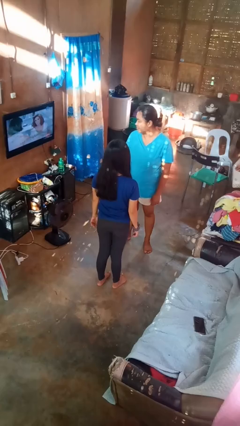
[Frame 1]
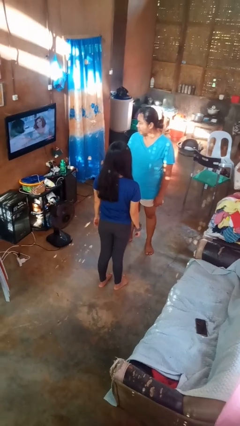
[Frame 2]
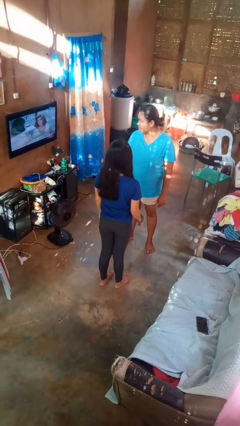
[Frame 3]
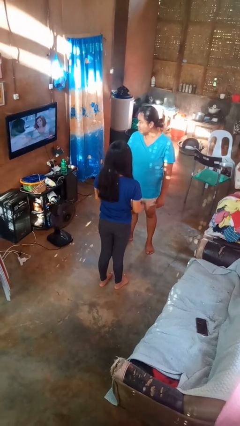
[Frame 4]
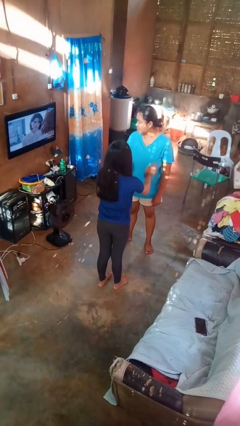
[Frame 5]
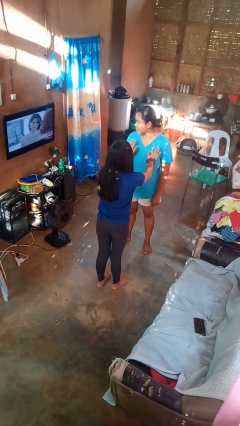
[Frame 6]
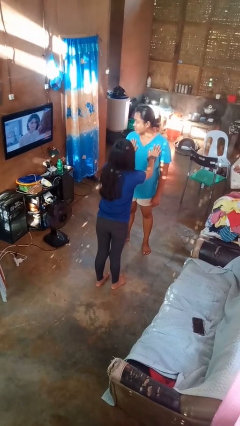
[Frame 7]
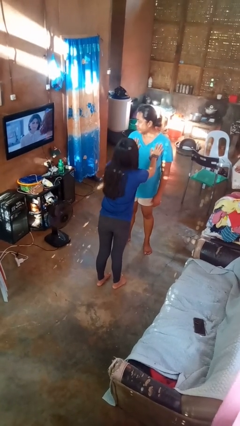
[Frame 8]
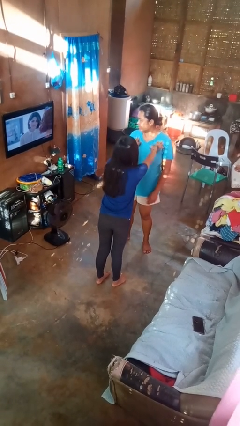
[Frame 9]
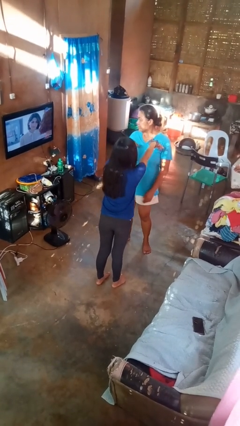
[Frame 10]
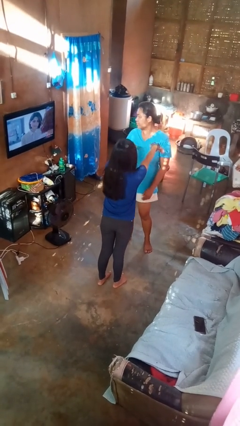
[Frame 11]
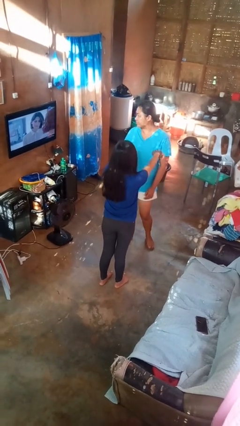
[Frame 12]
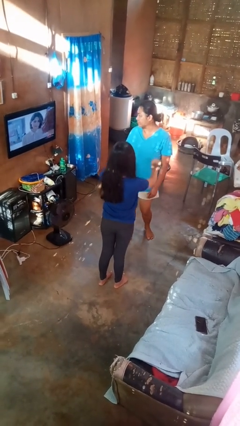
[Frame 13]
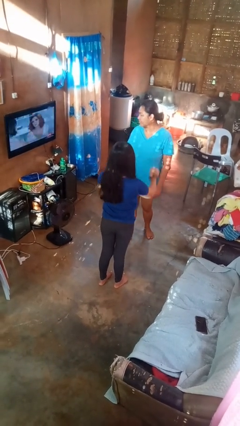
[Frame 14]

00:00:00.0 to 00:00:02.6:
person shoves person

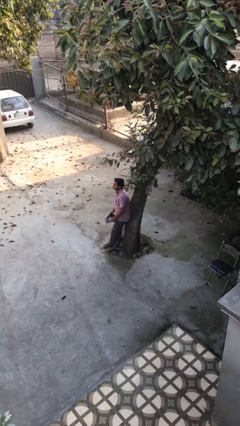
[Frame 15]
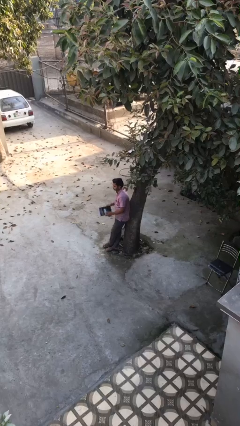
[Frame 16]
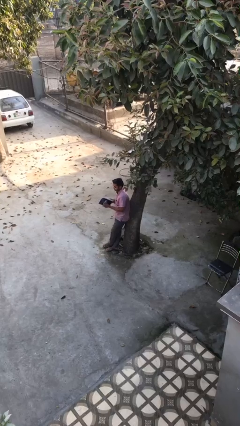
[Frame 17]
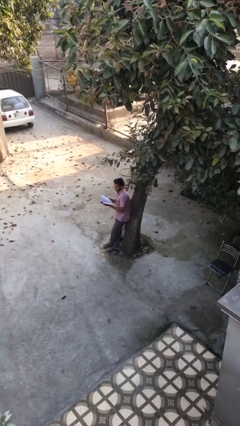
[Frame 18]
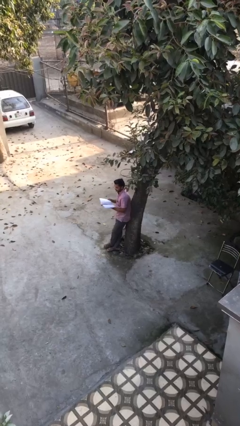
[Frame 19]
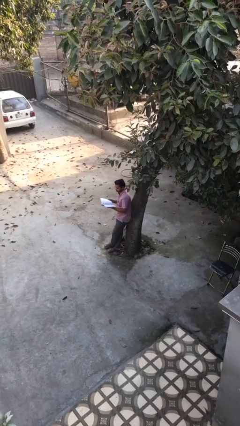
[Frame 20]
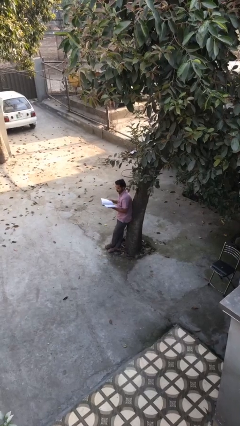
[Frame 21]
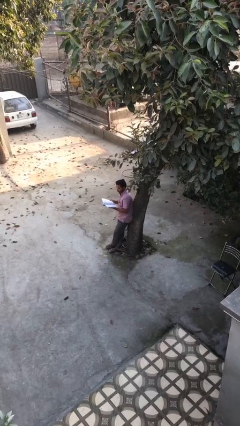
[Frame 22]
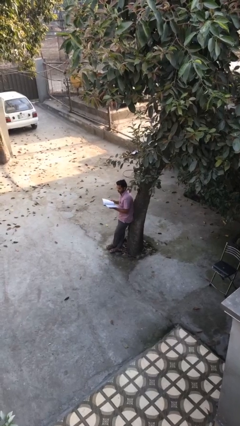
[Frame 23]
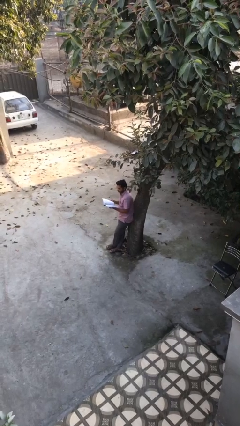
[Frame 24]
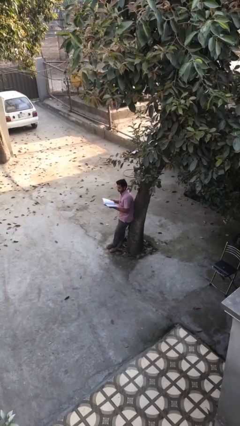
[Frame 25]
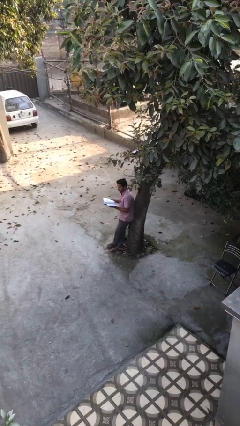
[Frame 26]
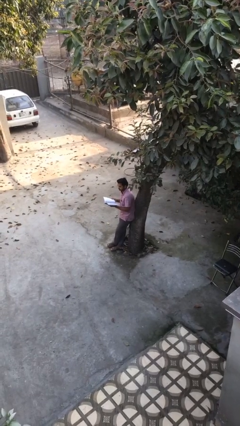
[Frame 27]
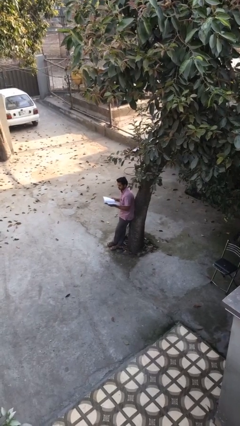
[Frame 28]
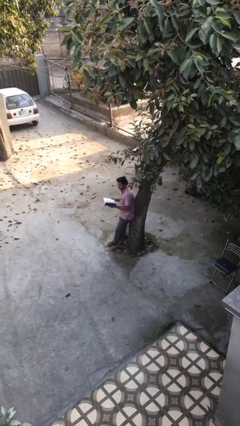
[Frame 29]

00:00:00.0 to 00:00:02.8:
person reads document

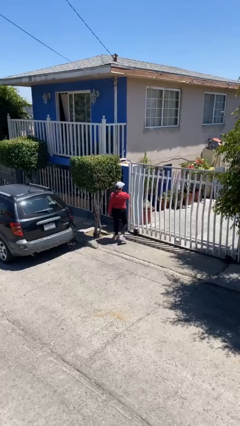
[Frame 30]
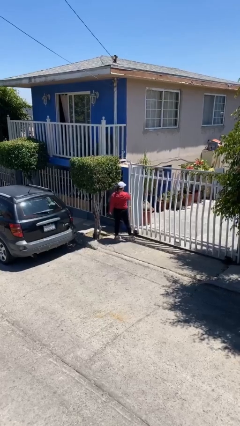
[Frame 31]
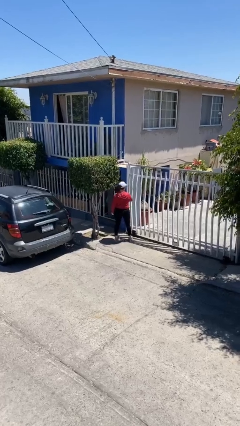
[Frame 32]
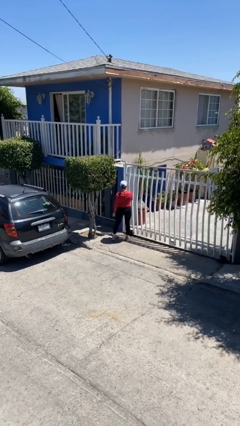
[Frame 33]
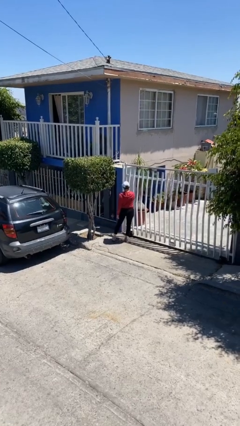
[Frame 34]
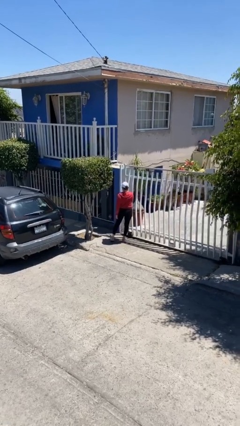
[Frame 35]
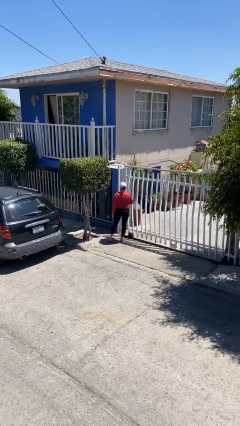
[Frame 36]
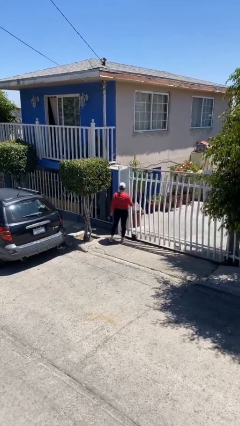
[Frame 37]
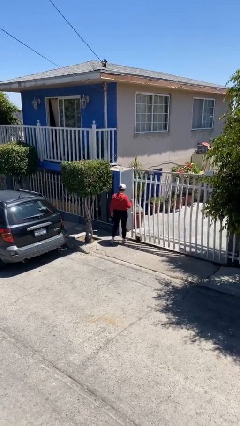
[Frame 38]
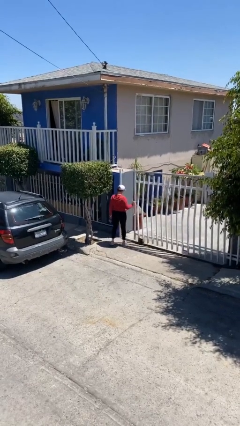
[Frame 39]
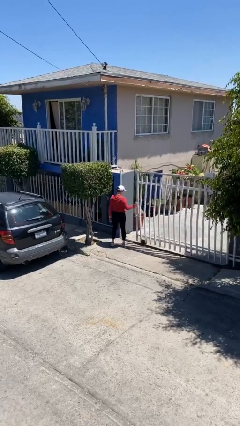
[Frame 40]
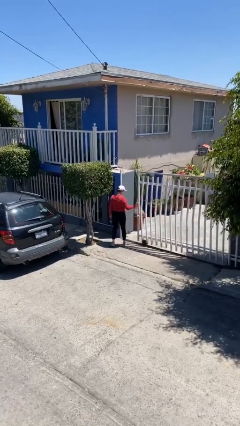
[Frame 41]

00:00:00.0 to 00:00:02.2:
person opens facility door

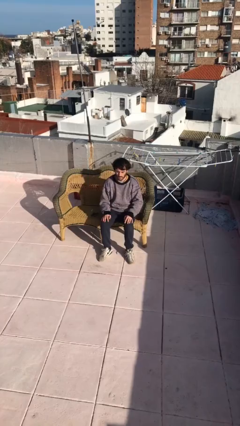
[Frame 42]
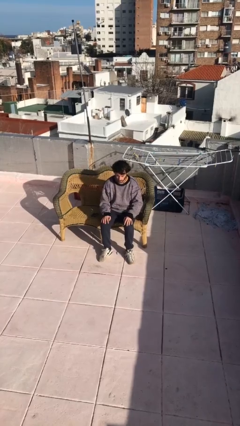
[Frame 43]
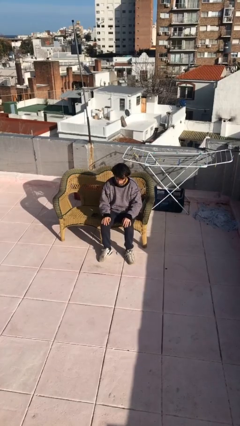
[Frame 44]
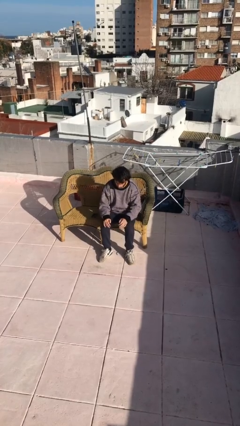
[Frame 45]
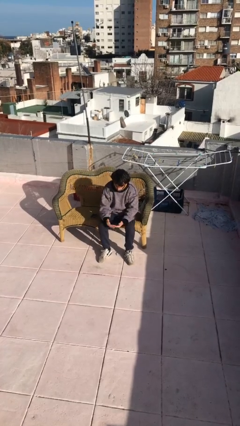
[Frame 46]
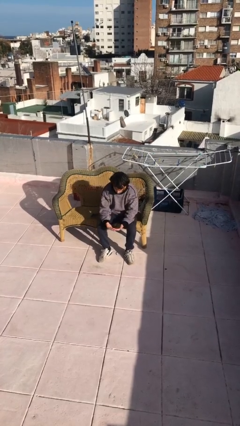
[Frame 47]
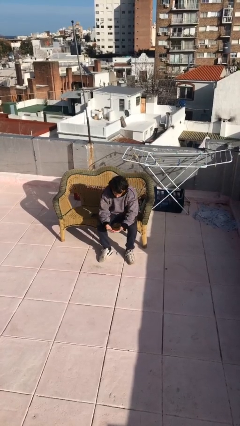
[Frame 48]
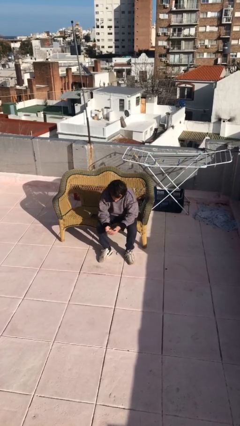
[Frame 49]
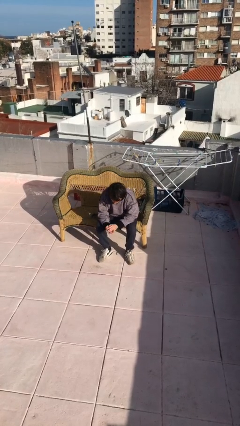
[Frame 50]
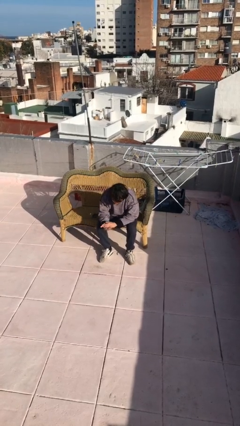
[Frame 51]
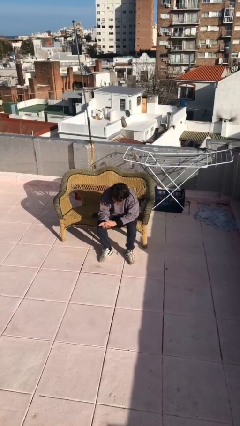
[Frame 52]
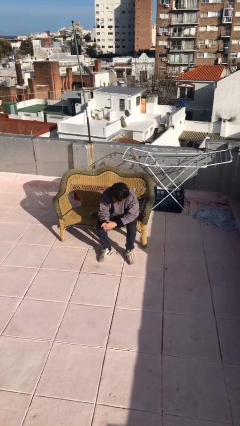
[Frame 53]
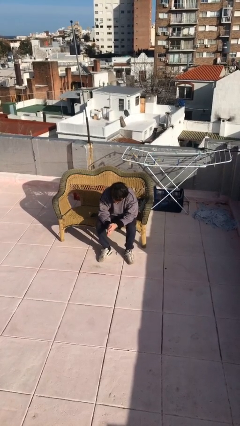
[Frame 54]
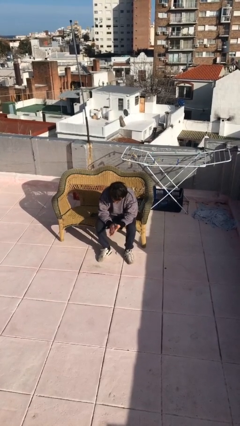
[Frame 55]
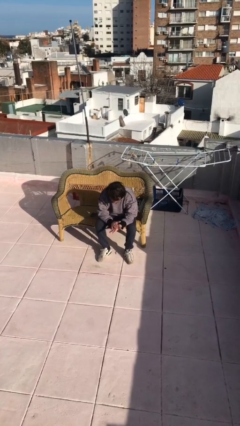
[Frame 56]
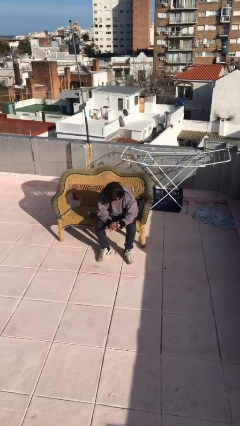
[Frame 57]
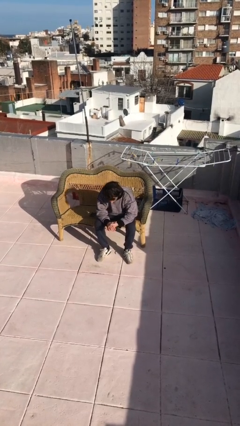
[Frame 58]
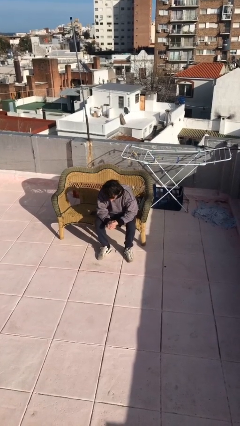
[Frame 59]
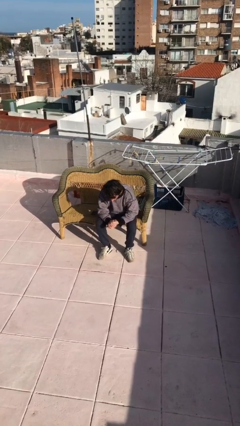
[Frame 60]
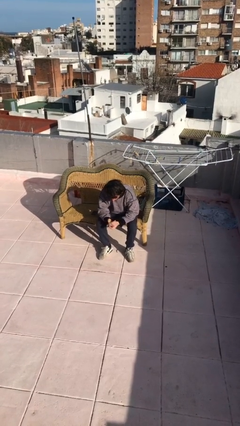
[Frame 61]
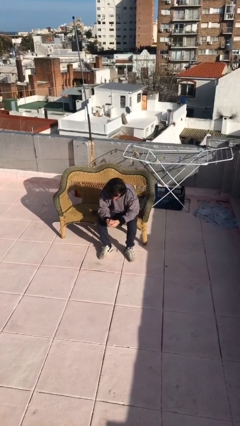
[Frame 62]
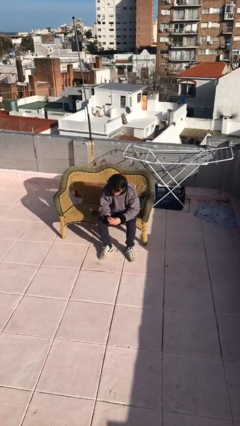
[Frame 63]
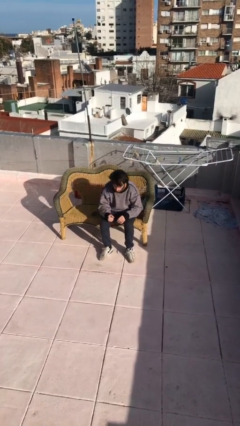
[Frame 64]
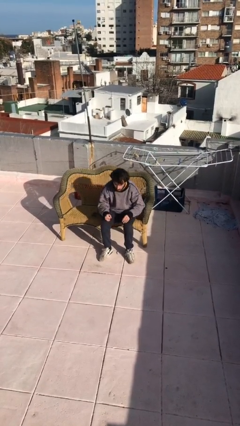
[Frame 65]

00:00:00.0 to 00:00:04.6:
person looks at hands in lap

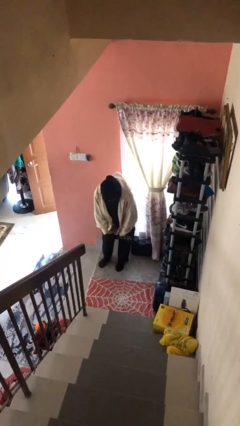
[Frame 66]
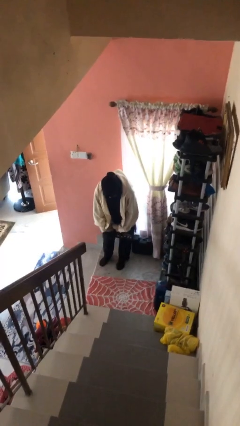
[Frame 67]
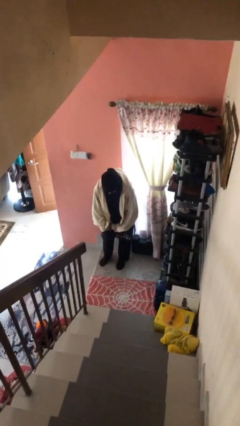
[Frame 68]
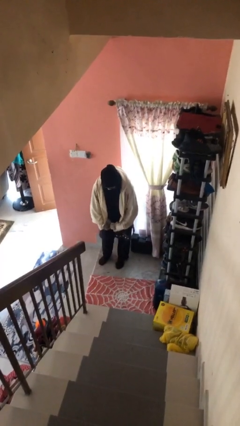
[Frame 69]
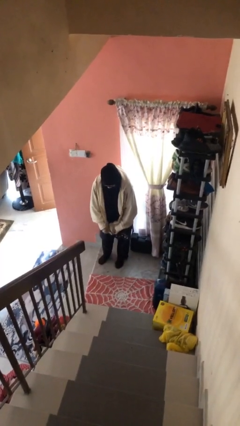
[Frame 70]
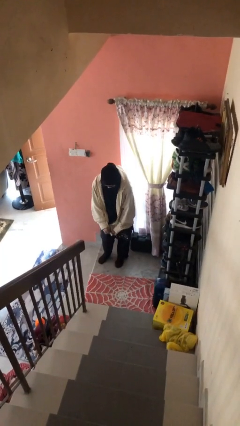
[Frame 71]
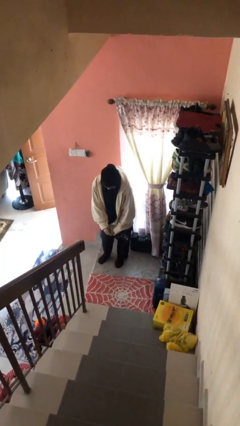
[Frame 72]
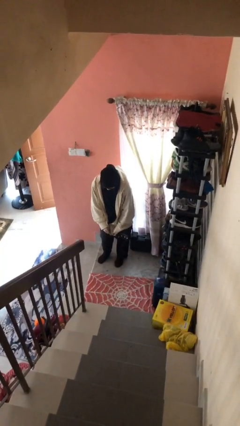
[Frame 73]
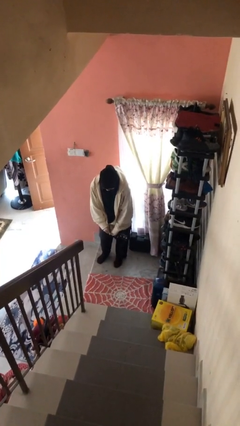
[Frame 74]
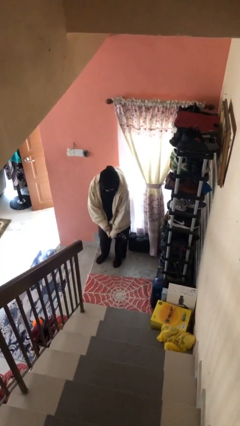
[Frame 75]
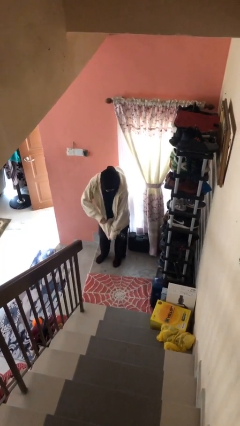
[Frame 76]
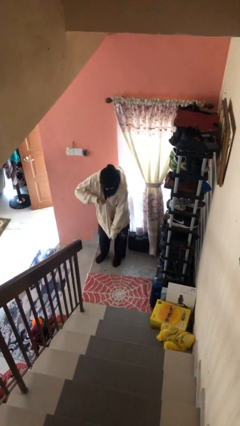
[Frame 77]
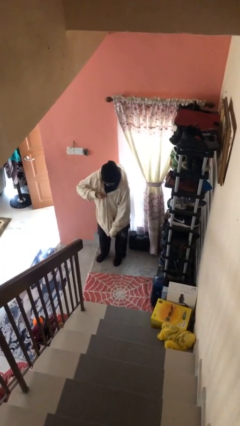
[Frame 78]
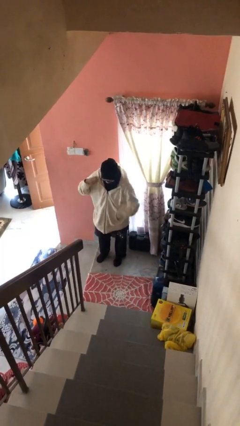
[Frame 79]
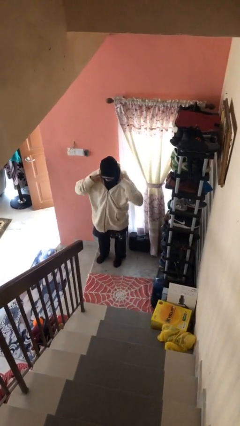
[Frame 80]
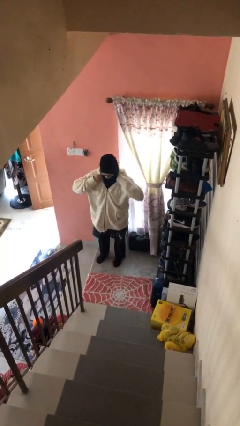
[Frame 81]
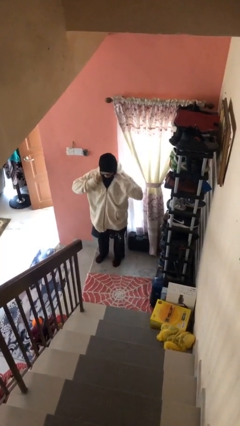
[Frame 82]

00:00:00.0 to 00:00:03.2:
person zips up jacket

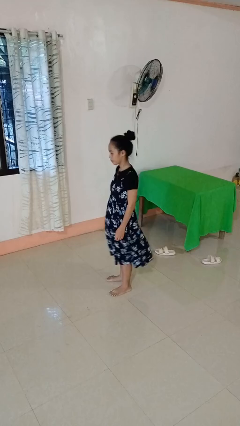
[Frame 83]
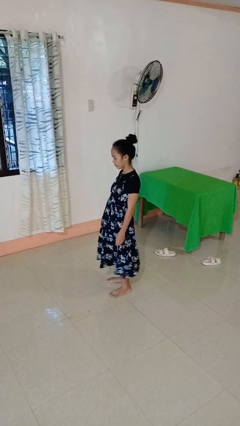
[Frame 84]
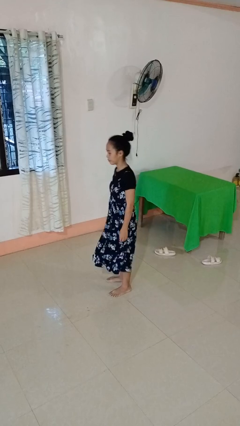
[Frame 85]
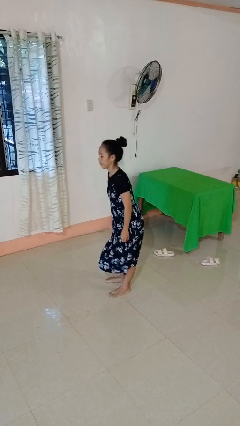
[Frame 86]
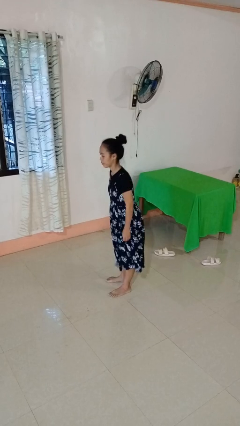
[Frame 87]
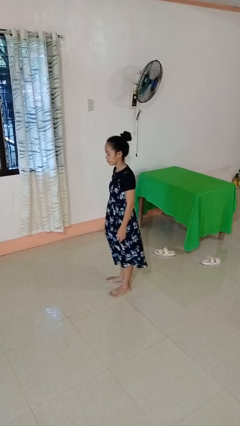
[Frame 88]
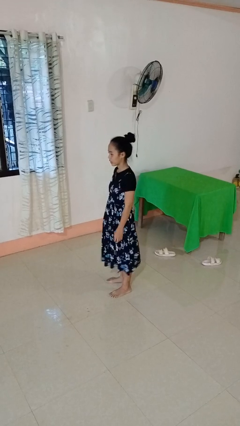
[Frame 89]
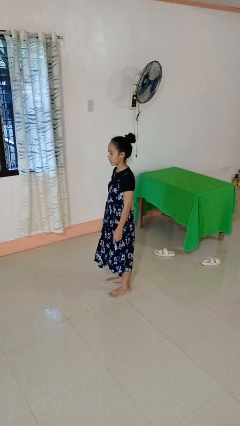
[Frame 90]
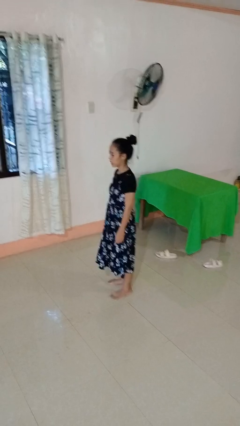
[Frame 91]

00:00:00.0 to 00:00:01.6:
person wiggles hips

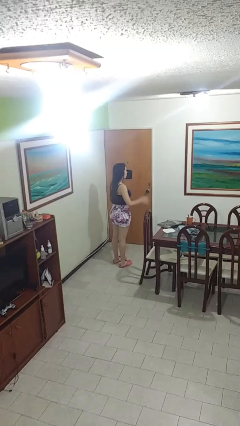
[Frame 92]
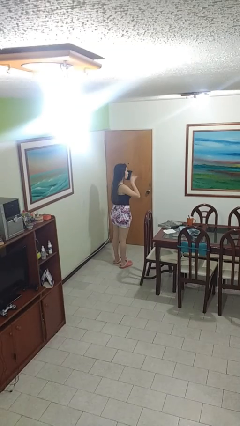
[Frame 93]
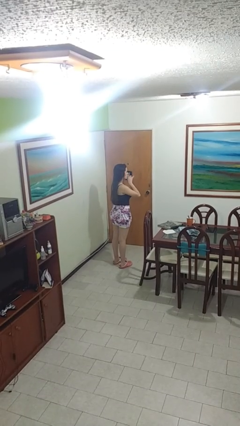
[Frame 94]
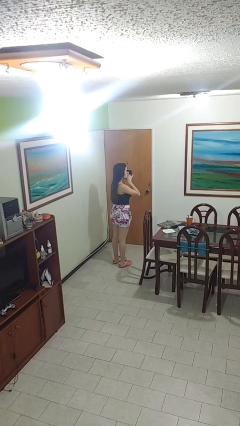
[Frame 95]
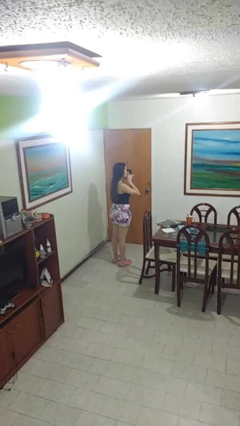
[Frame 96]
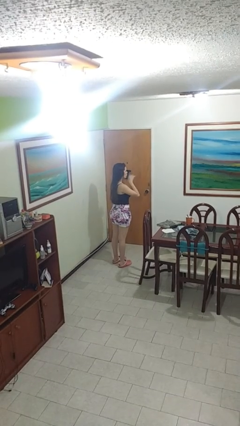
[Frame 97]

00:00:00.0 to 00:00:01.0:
person gestures be quiet
